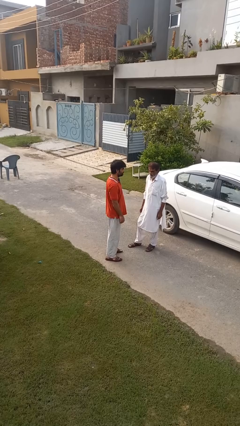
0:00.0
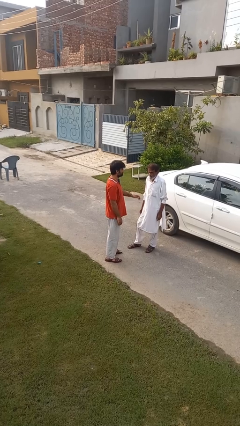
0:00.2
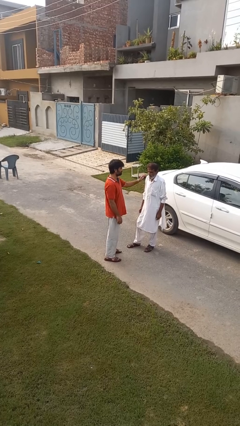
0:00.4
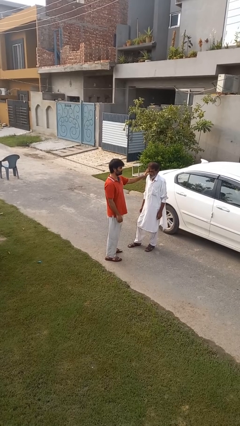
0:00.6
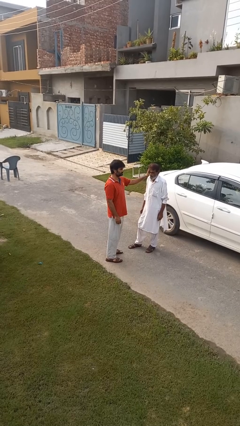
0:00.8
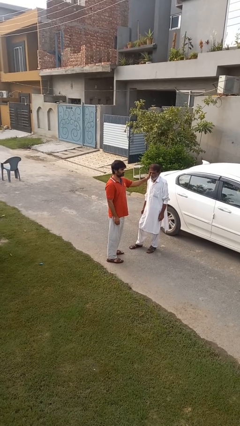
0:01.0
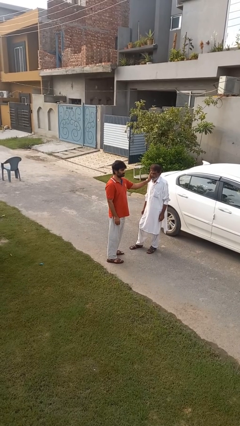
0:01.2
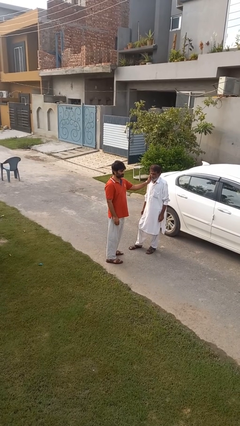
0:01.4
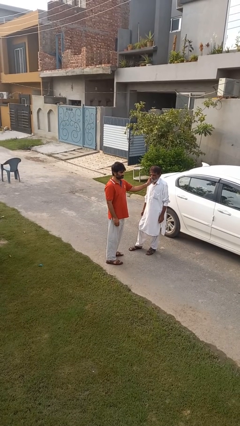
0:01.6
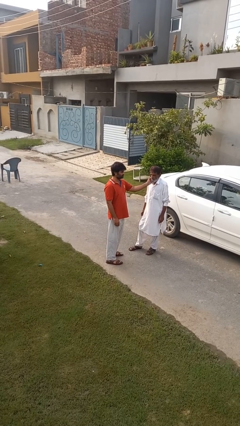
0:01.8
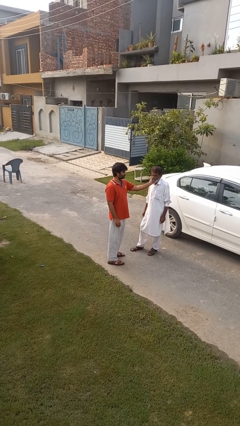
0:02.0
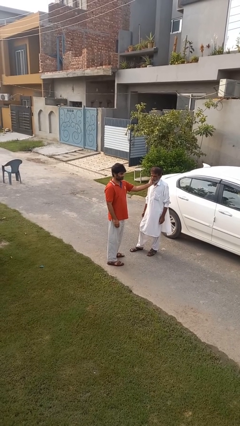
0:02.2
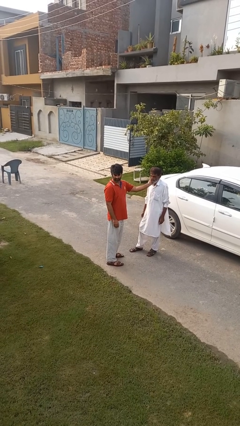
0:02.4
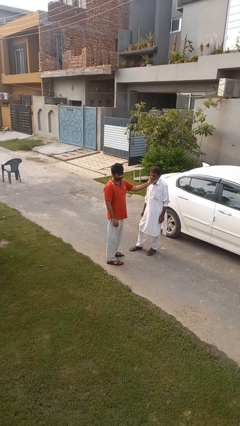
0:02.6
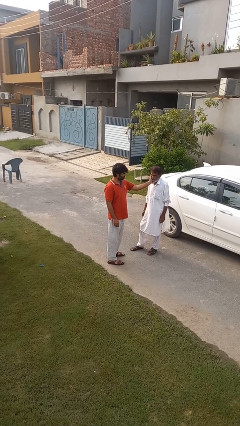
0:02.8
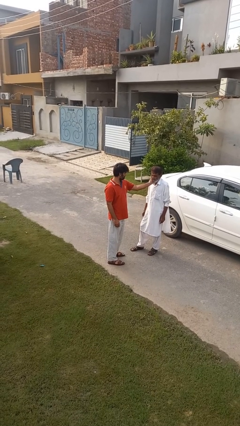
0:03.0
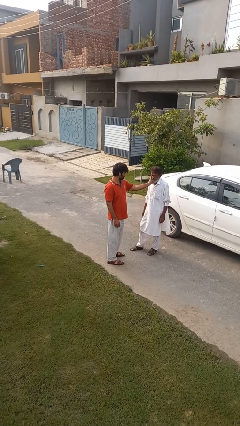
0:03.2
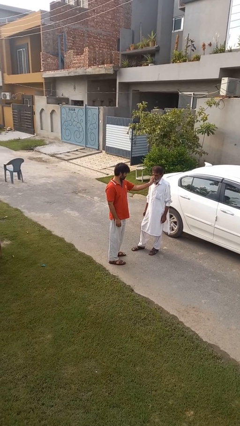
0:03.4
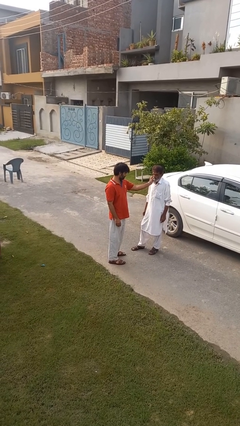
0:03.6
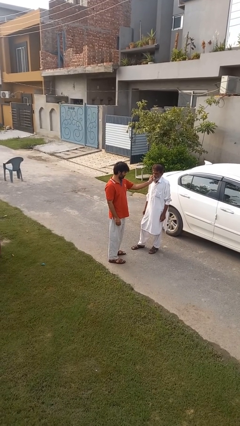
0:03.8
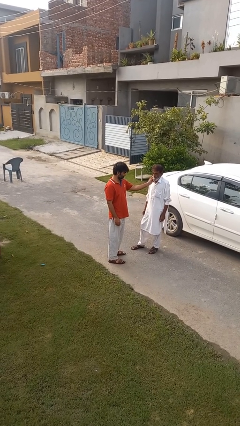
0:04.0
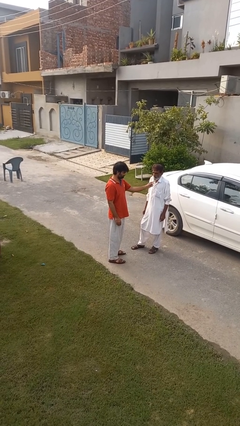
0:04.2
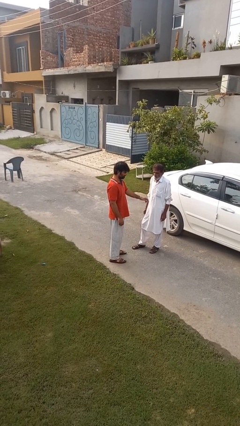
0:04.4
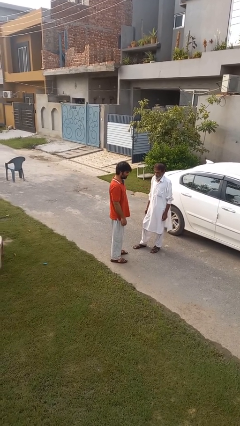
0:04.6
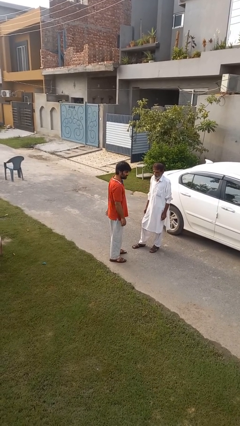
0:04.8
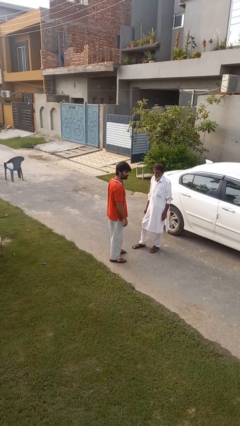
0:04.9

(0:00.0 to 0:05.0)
person touches face of person

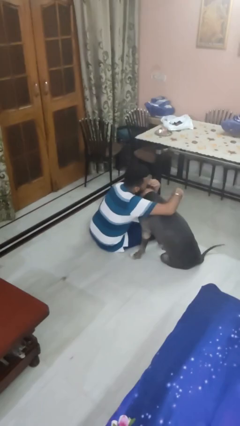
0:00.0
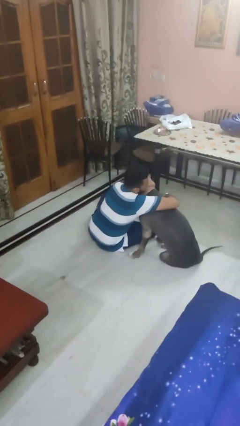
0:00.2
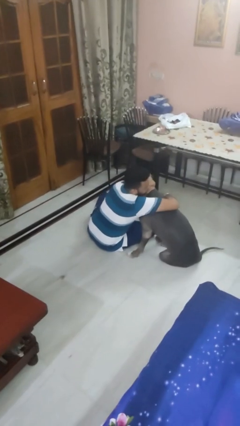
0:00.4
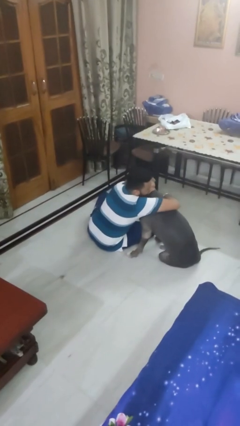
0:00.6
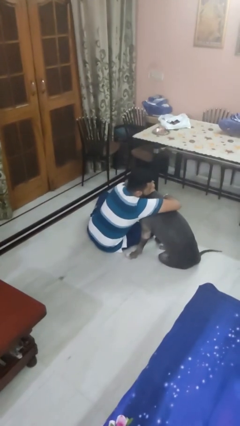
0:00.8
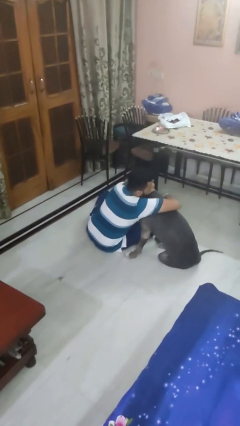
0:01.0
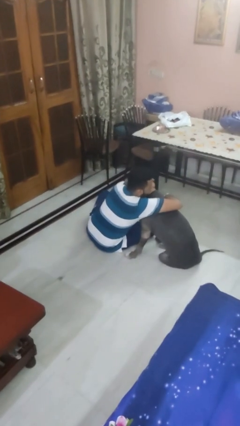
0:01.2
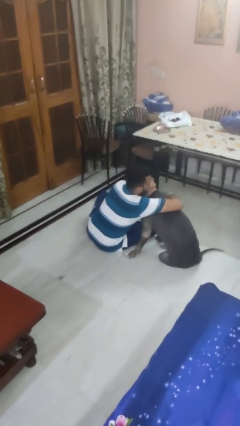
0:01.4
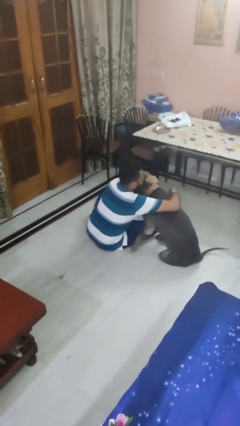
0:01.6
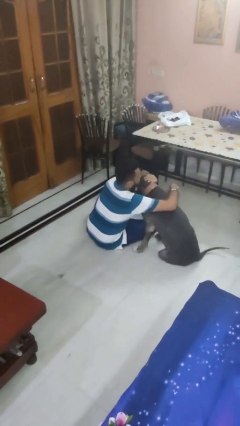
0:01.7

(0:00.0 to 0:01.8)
person hugs dog

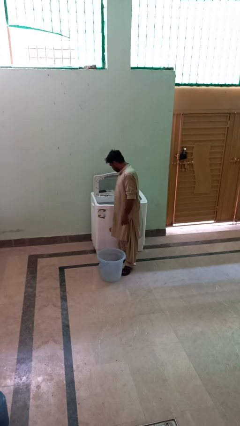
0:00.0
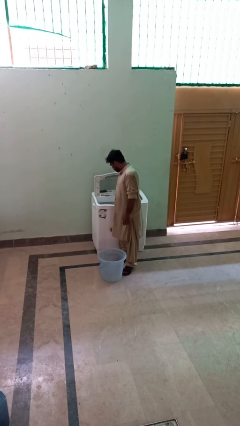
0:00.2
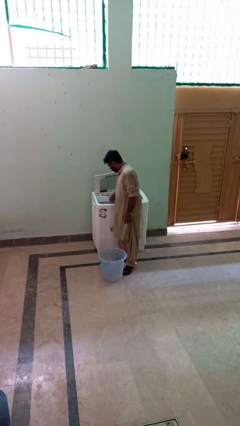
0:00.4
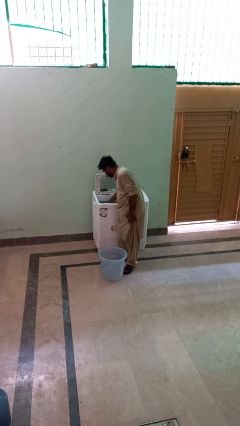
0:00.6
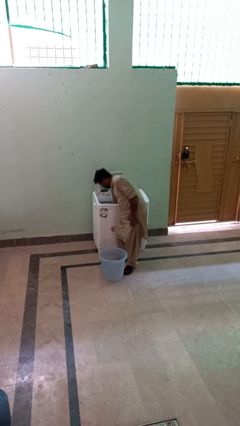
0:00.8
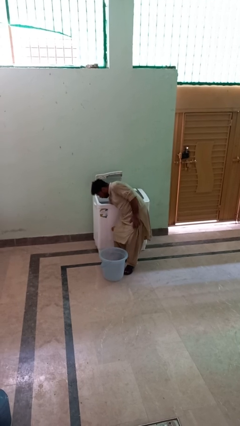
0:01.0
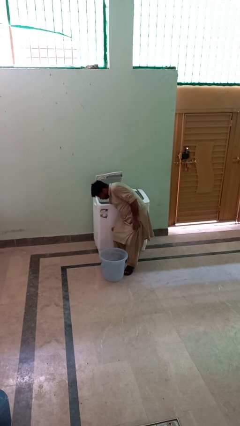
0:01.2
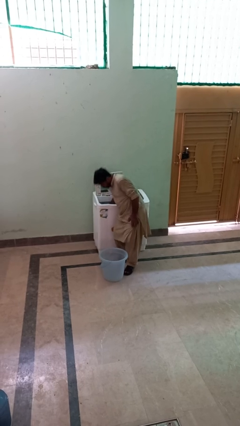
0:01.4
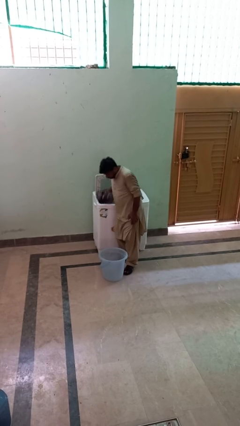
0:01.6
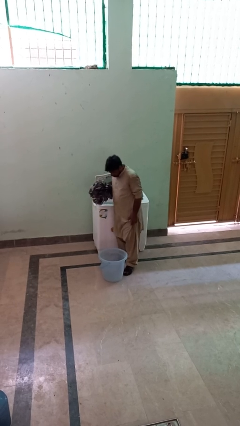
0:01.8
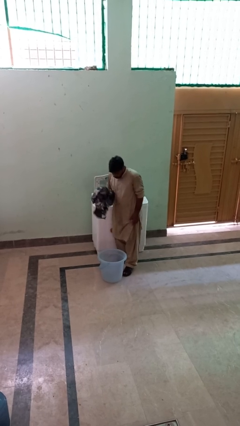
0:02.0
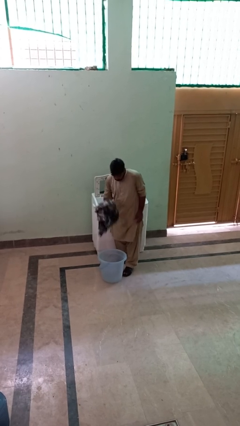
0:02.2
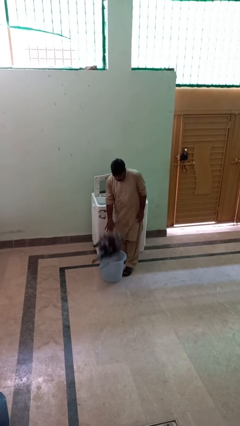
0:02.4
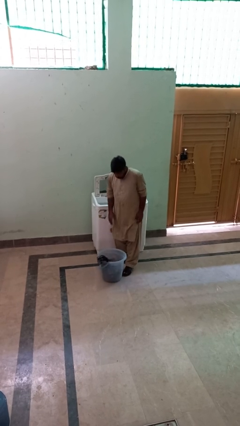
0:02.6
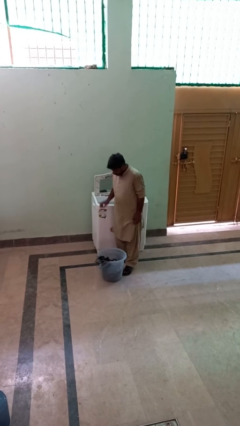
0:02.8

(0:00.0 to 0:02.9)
person unloads clotheswasher

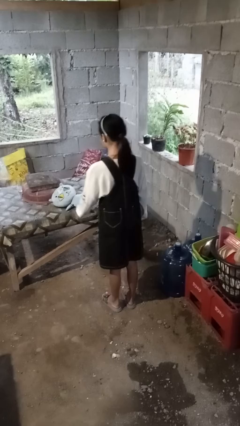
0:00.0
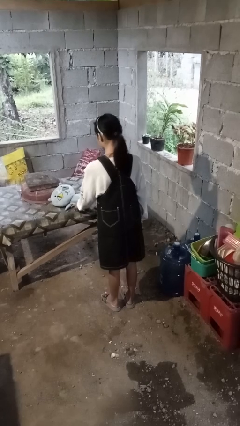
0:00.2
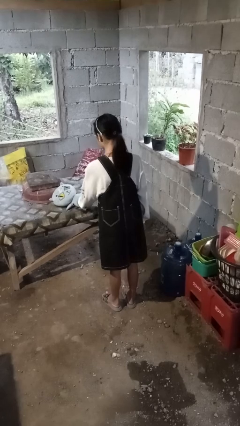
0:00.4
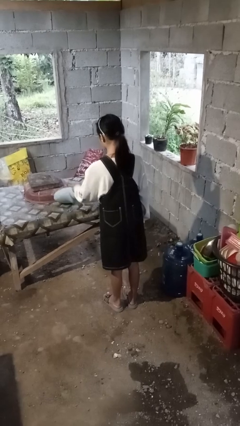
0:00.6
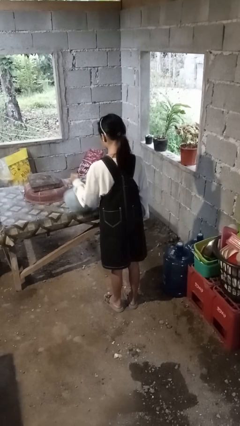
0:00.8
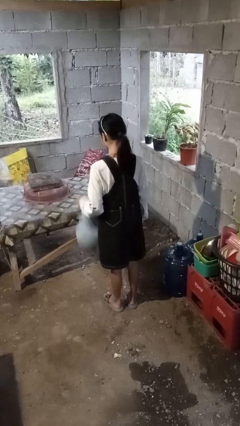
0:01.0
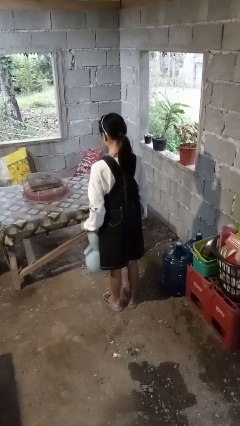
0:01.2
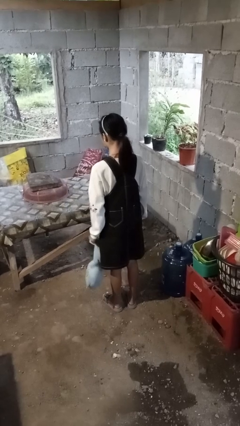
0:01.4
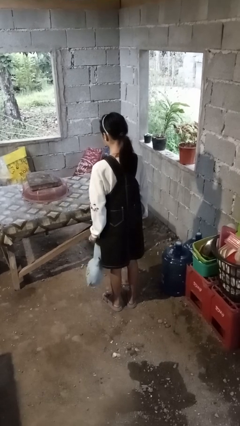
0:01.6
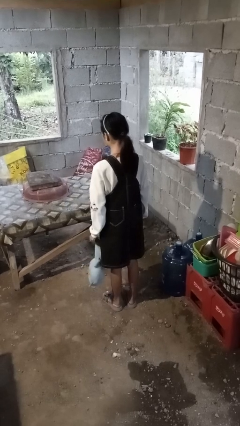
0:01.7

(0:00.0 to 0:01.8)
person picks up object from table

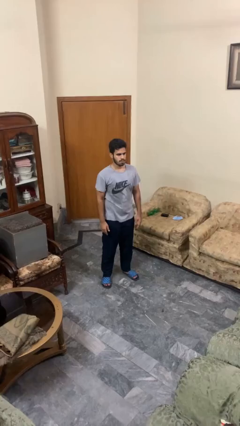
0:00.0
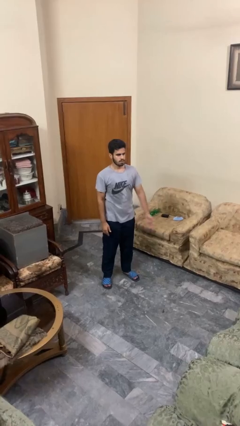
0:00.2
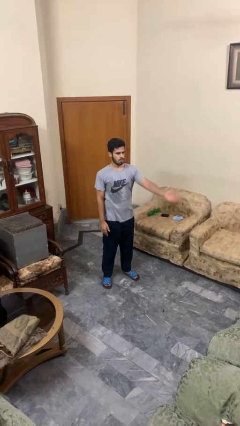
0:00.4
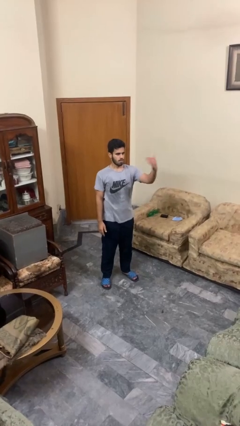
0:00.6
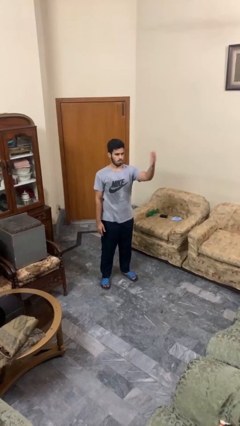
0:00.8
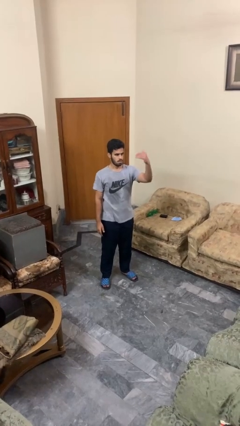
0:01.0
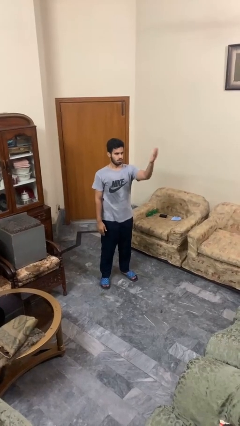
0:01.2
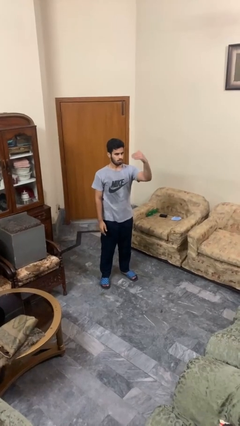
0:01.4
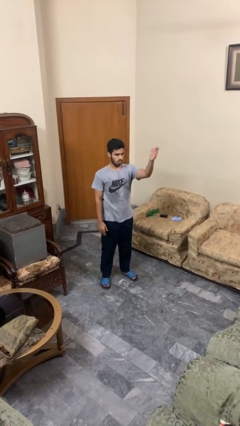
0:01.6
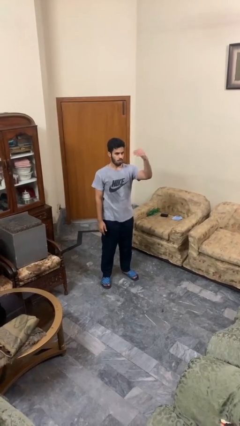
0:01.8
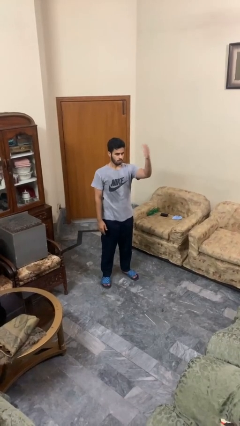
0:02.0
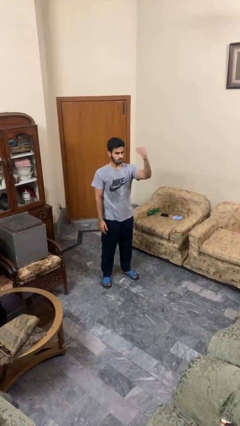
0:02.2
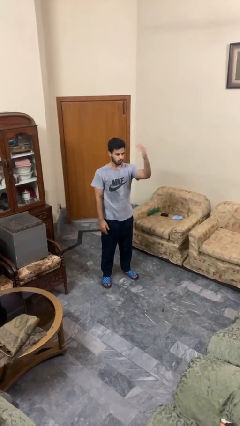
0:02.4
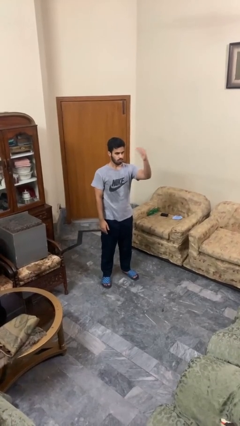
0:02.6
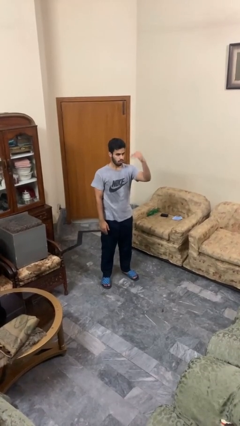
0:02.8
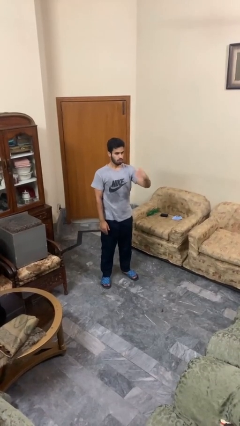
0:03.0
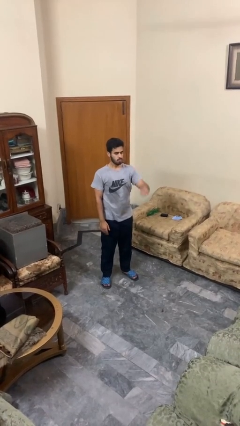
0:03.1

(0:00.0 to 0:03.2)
person gestures come here

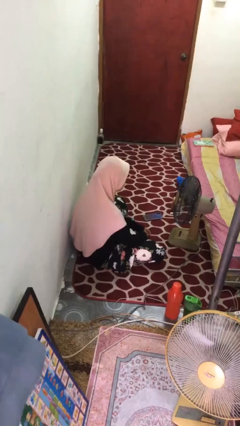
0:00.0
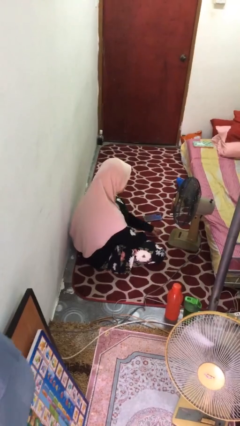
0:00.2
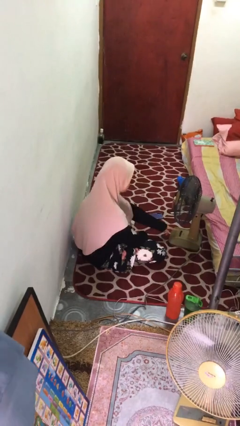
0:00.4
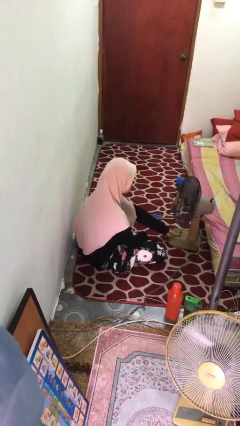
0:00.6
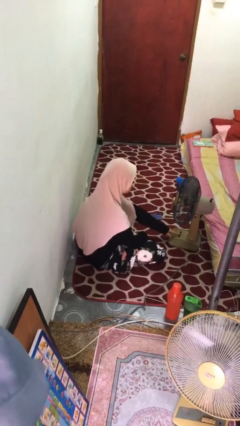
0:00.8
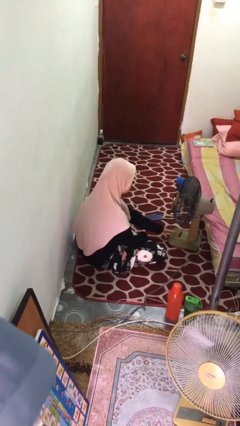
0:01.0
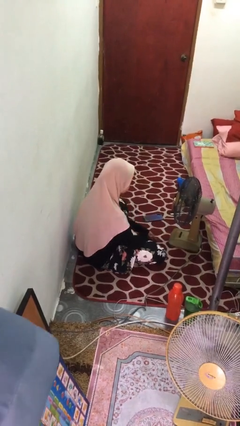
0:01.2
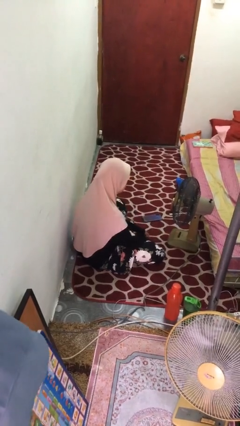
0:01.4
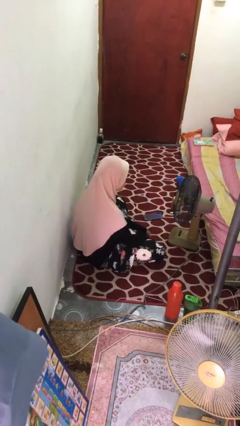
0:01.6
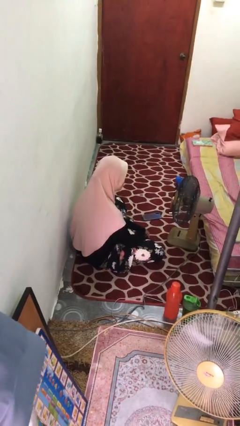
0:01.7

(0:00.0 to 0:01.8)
person turns on fan

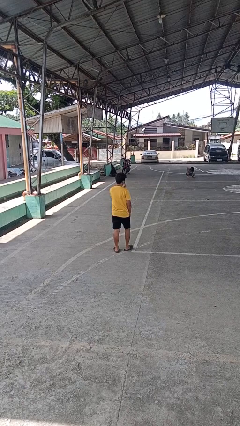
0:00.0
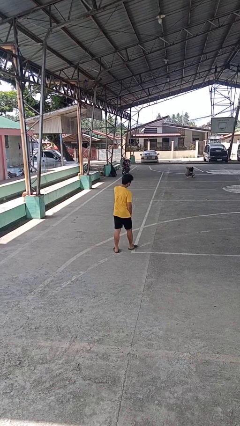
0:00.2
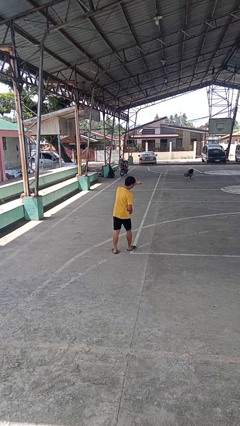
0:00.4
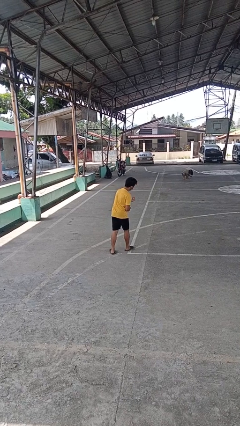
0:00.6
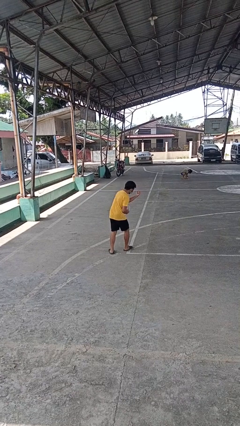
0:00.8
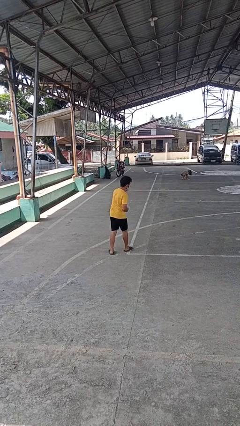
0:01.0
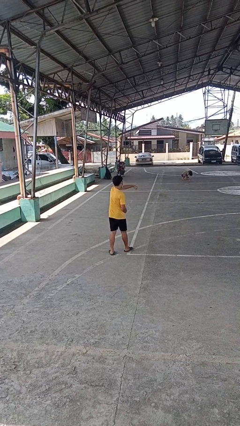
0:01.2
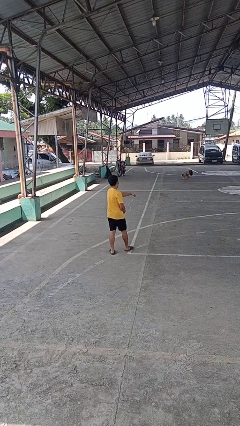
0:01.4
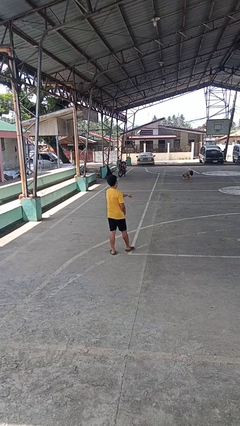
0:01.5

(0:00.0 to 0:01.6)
person punches
